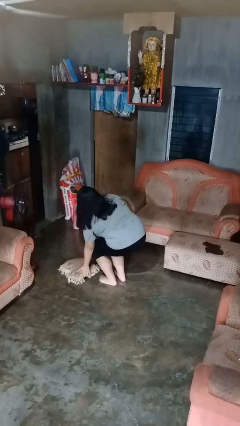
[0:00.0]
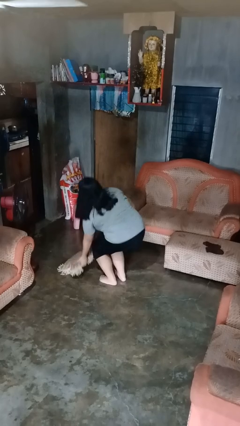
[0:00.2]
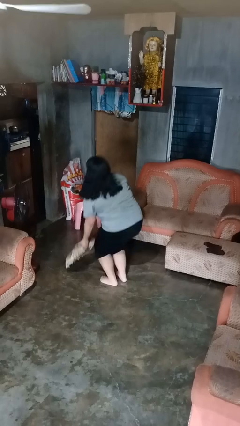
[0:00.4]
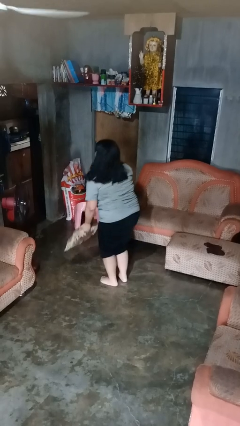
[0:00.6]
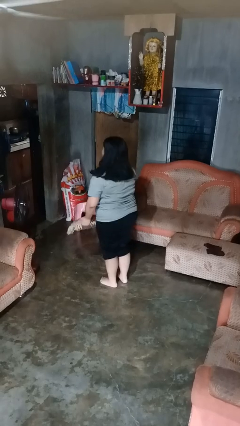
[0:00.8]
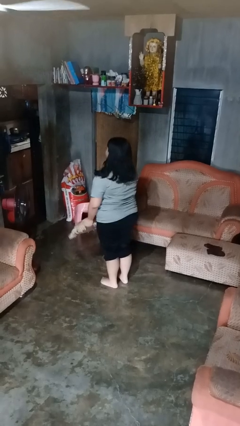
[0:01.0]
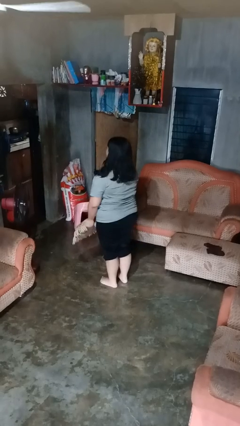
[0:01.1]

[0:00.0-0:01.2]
person picks up object from floor

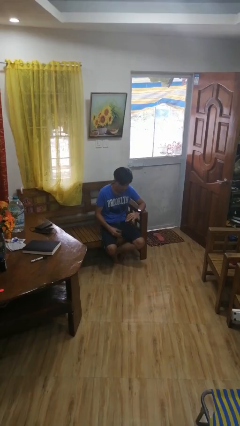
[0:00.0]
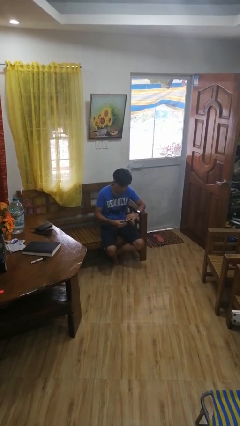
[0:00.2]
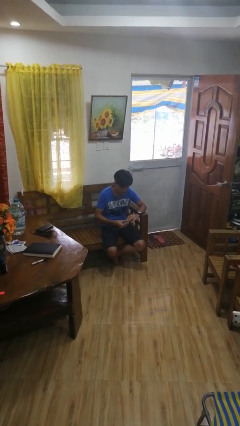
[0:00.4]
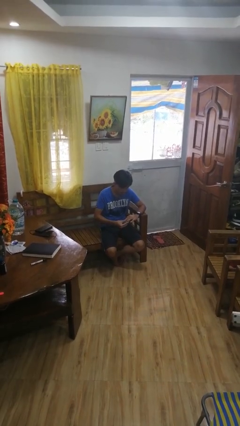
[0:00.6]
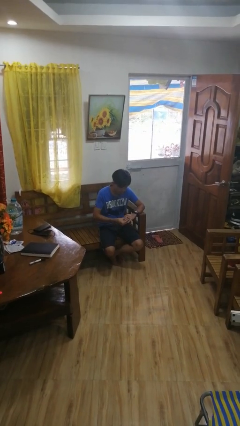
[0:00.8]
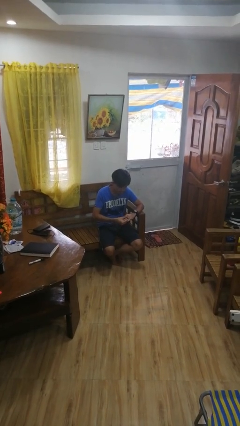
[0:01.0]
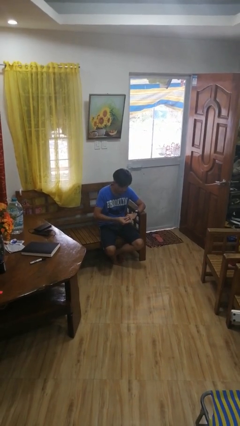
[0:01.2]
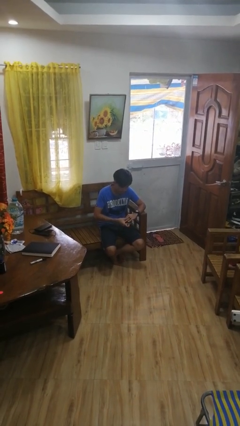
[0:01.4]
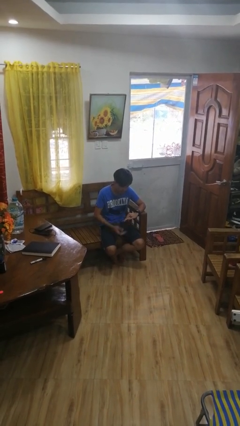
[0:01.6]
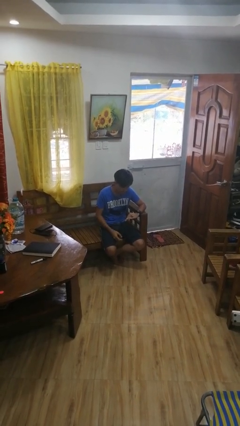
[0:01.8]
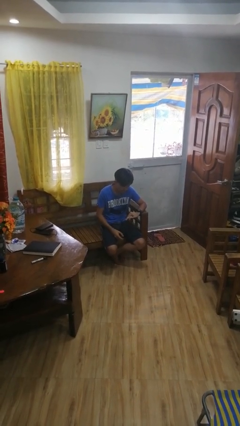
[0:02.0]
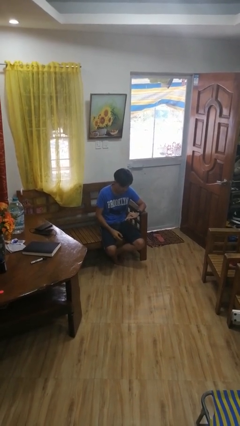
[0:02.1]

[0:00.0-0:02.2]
person puts on ring

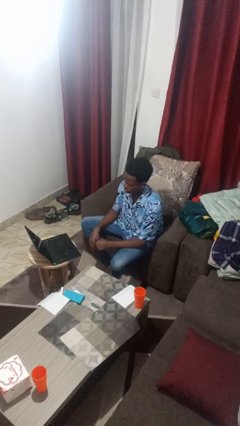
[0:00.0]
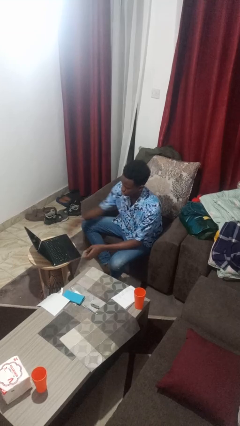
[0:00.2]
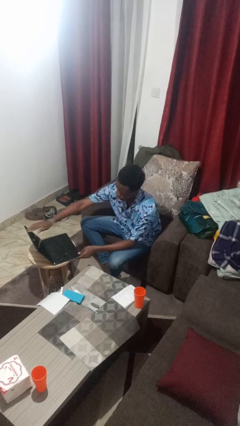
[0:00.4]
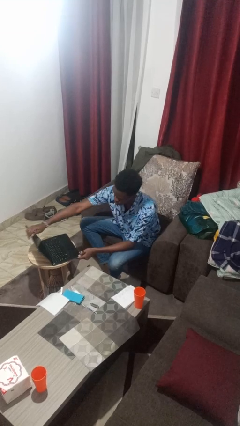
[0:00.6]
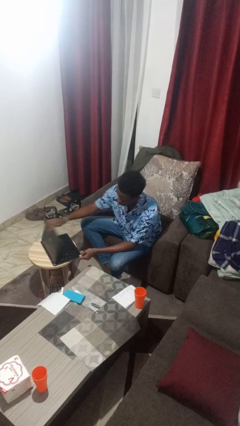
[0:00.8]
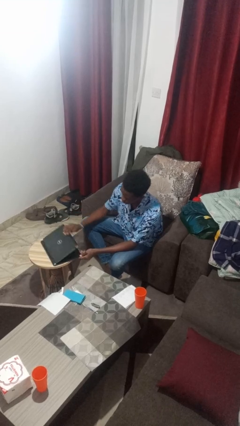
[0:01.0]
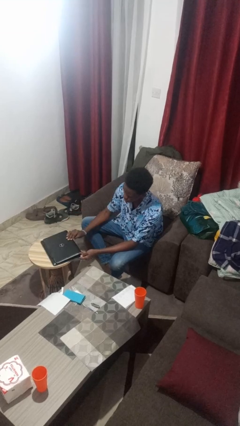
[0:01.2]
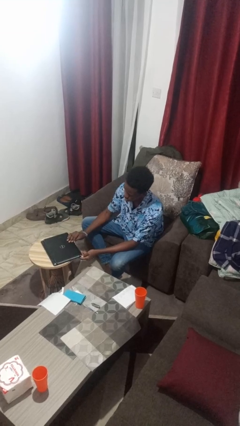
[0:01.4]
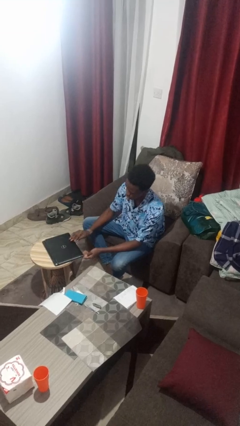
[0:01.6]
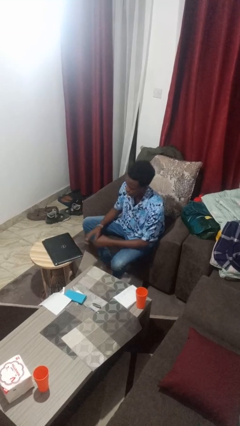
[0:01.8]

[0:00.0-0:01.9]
person closes laptop

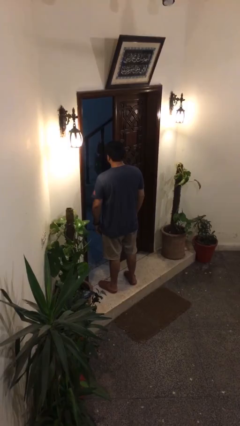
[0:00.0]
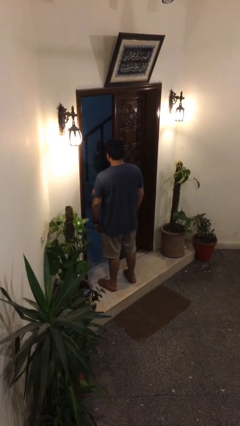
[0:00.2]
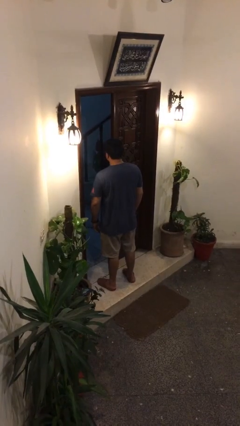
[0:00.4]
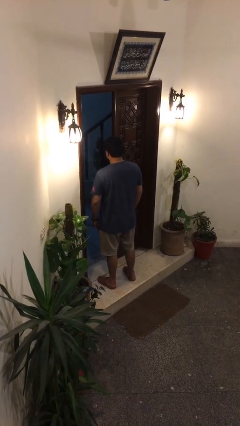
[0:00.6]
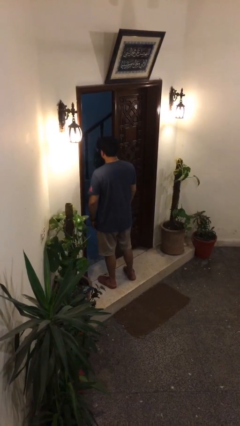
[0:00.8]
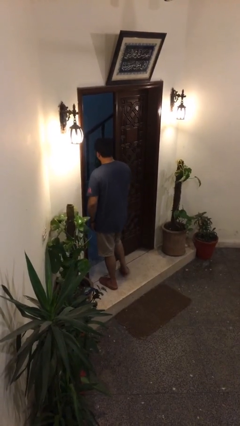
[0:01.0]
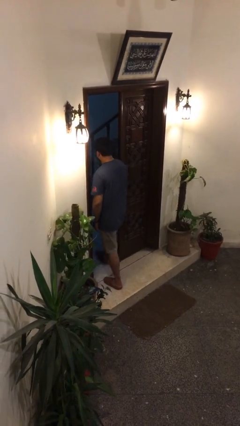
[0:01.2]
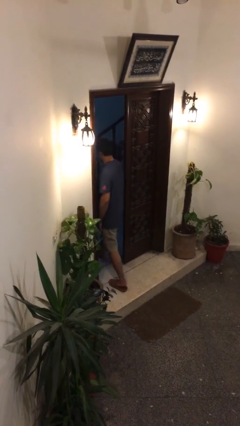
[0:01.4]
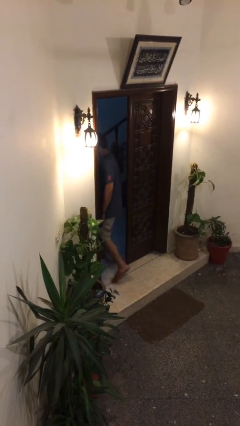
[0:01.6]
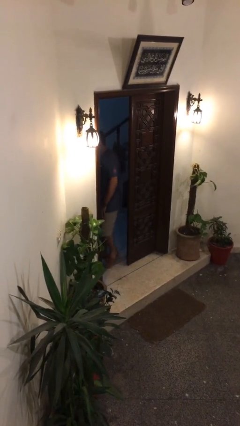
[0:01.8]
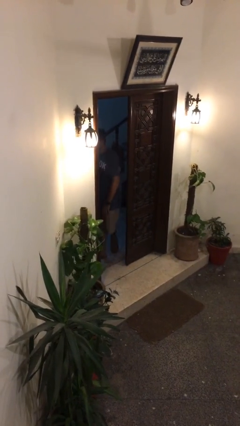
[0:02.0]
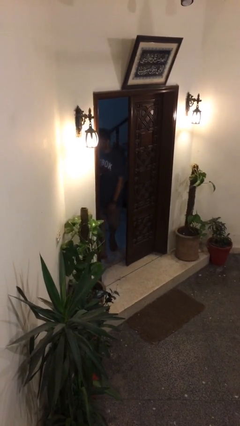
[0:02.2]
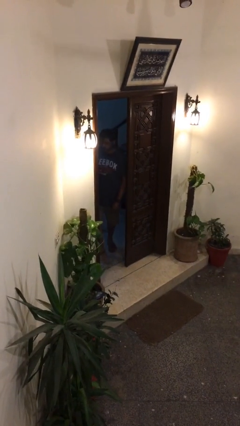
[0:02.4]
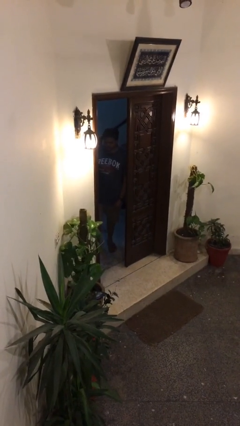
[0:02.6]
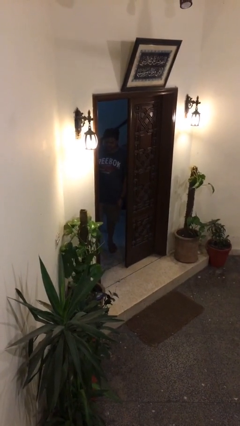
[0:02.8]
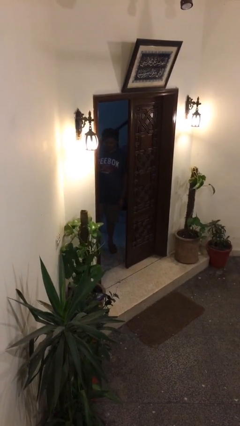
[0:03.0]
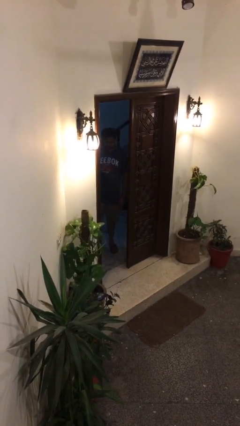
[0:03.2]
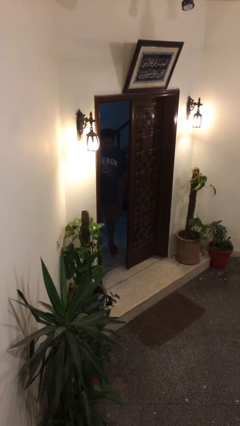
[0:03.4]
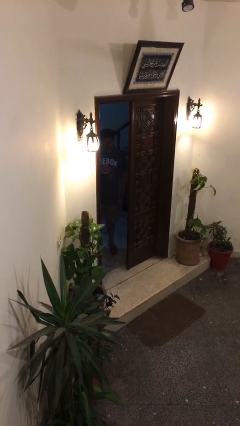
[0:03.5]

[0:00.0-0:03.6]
person exits scene through structure

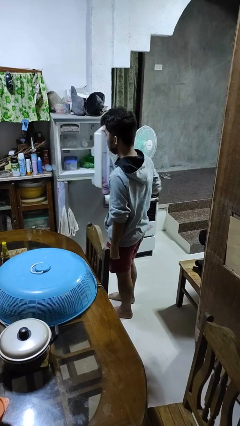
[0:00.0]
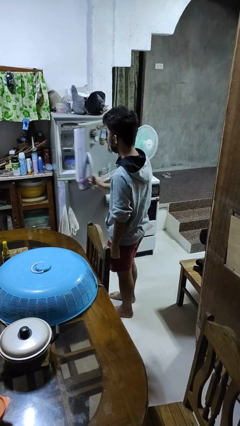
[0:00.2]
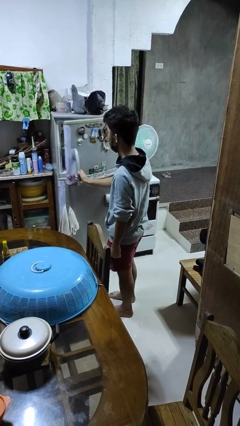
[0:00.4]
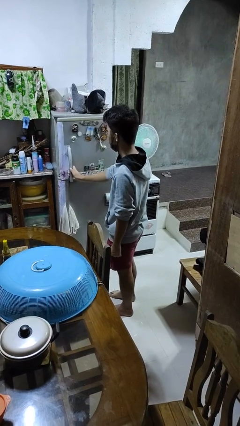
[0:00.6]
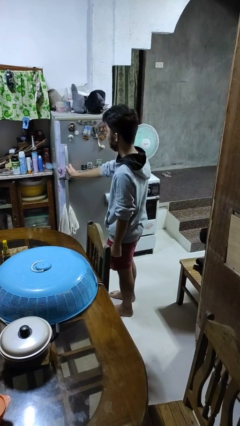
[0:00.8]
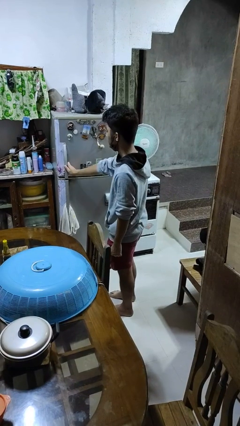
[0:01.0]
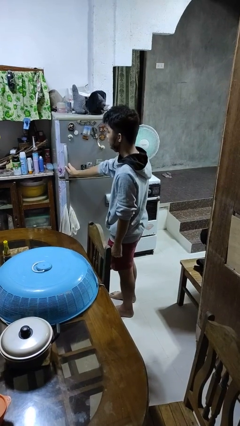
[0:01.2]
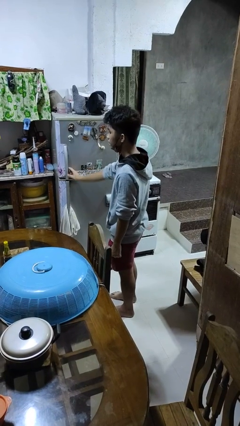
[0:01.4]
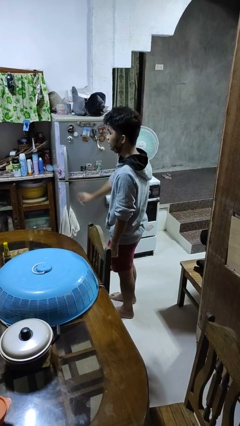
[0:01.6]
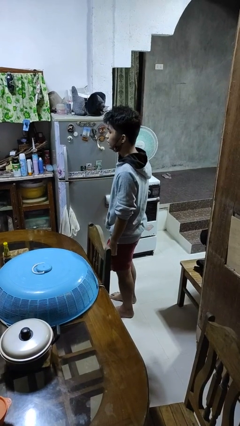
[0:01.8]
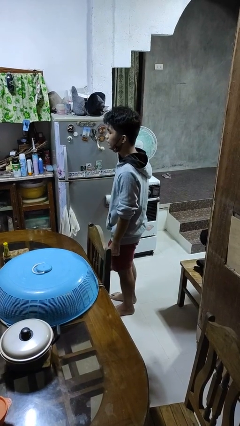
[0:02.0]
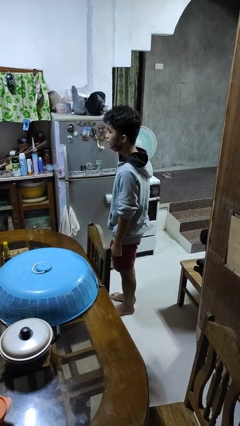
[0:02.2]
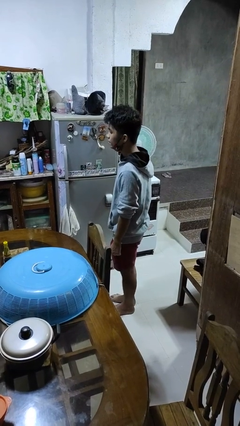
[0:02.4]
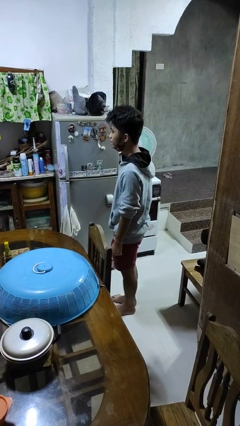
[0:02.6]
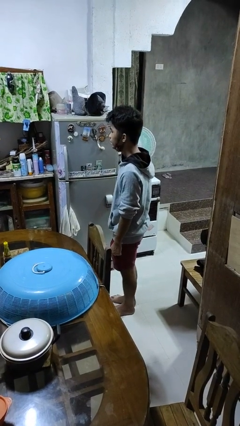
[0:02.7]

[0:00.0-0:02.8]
person closes refrigerator

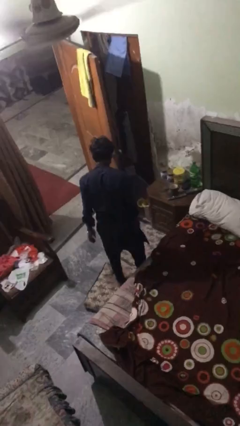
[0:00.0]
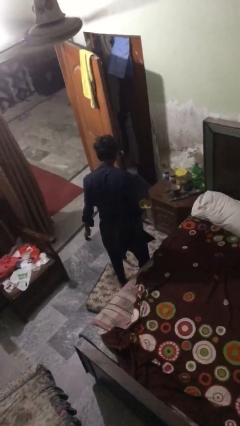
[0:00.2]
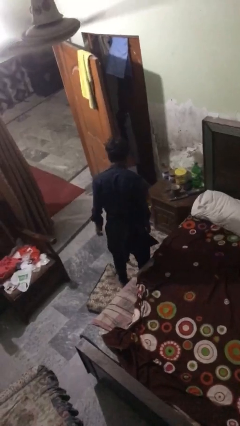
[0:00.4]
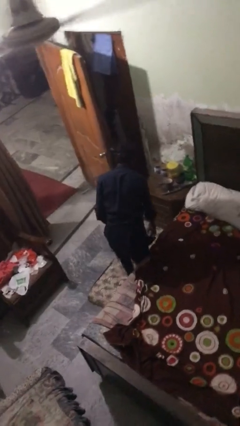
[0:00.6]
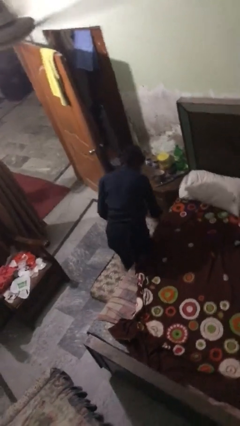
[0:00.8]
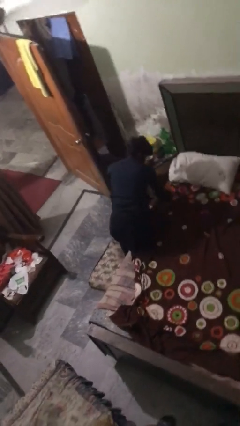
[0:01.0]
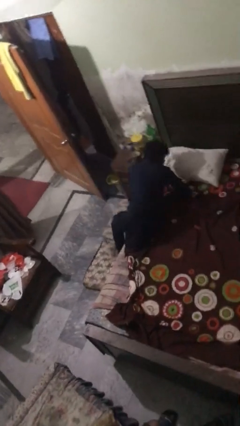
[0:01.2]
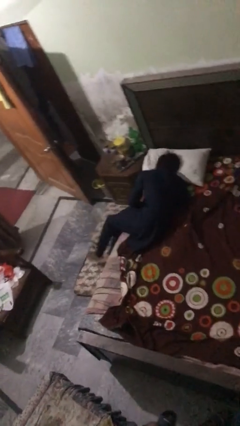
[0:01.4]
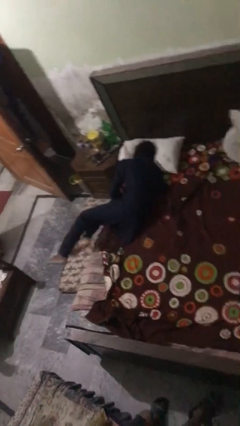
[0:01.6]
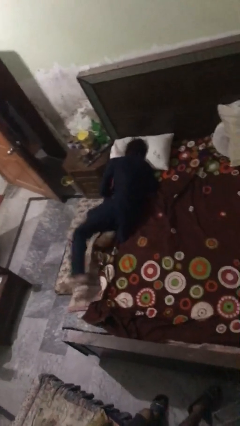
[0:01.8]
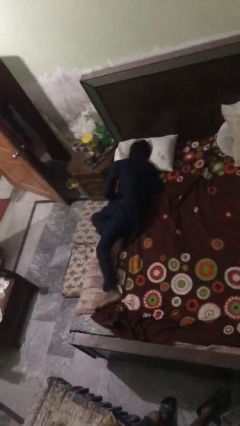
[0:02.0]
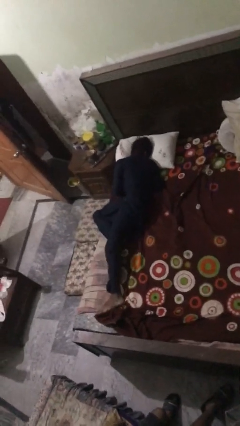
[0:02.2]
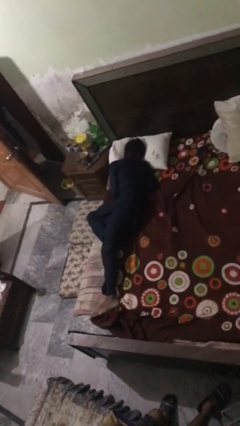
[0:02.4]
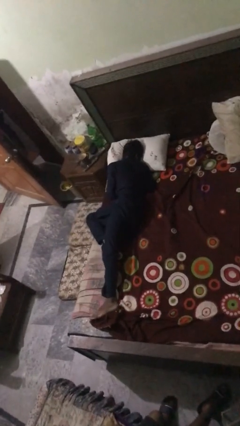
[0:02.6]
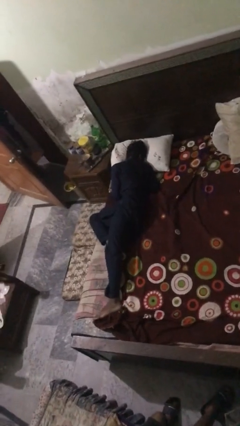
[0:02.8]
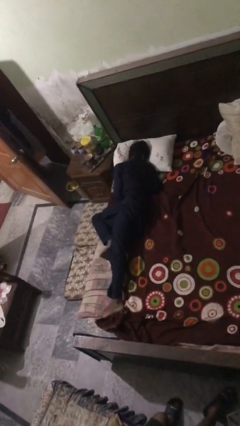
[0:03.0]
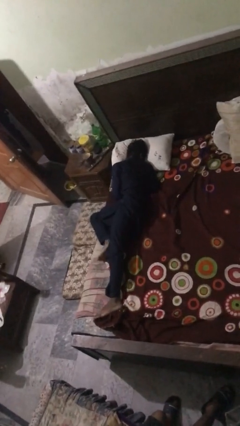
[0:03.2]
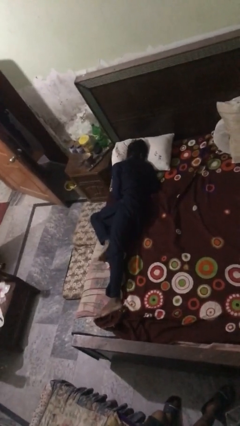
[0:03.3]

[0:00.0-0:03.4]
person lies down on bed

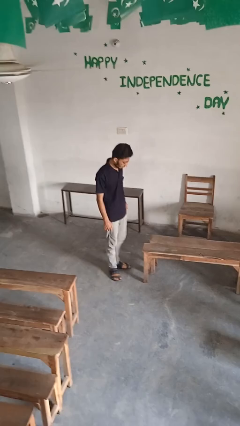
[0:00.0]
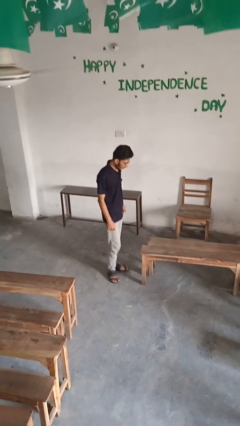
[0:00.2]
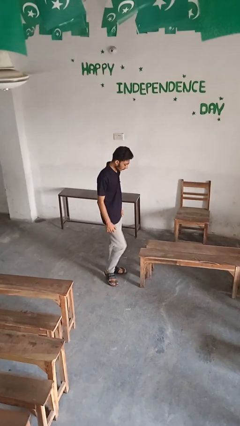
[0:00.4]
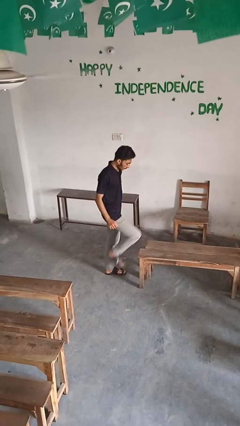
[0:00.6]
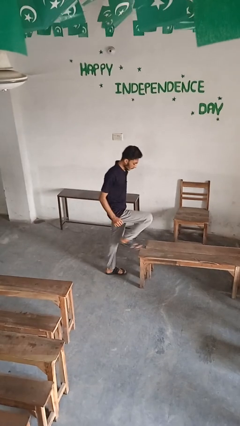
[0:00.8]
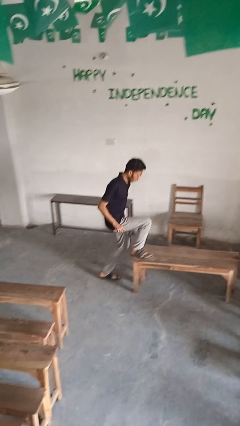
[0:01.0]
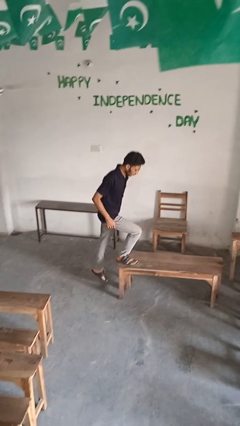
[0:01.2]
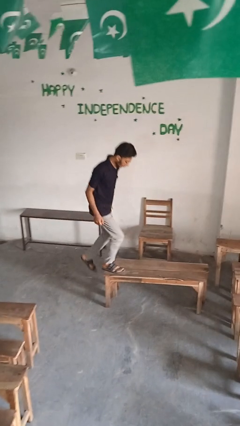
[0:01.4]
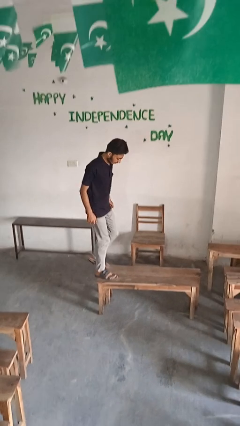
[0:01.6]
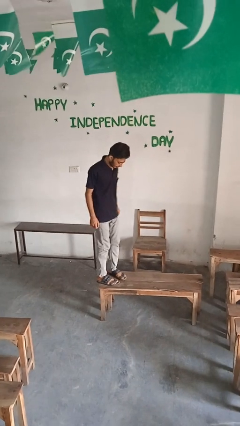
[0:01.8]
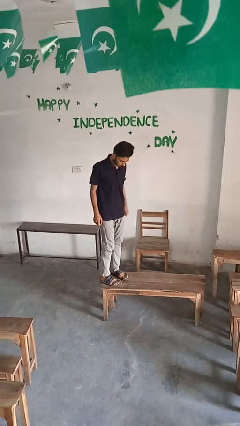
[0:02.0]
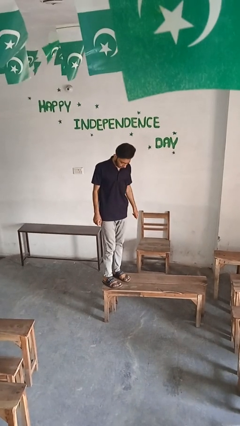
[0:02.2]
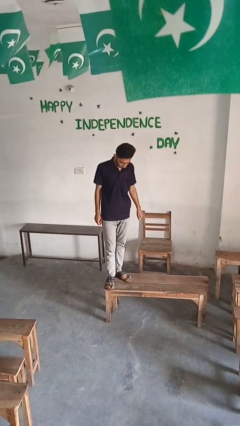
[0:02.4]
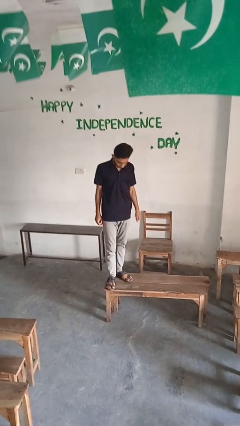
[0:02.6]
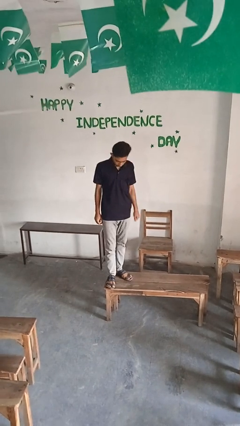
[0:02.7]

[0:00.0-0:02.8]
person climbs on table
